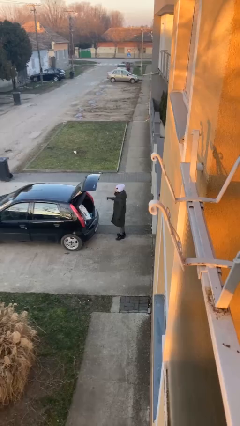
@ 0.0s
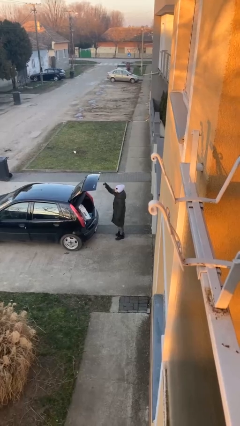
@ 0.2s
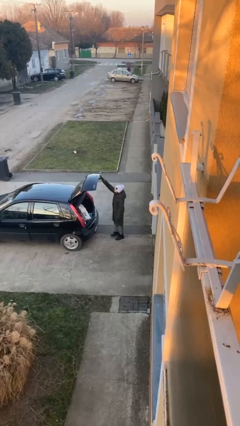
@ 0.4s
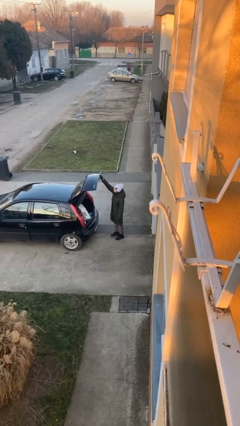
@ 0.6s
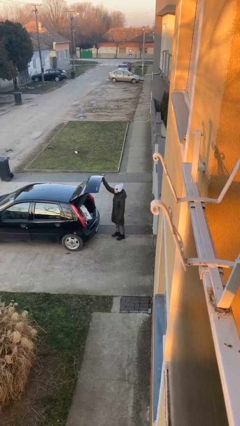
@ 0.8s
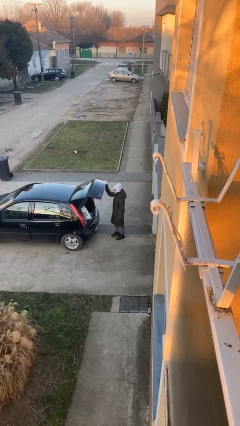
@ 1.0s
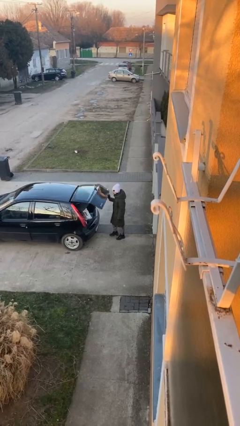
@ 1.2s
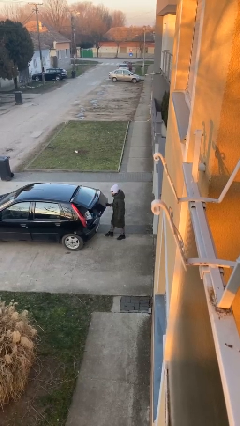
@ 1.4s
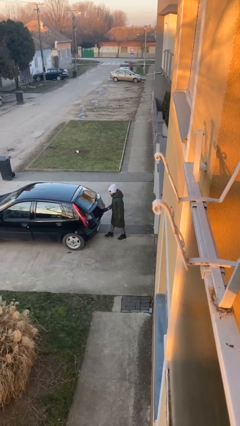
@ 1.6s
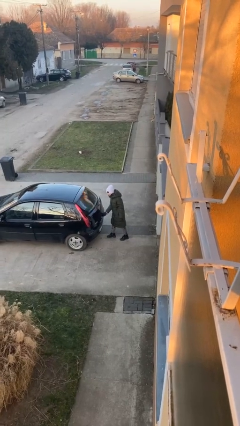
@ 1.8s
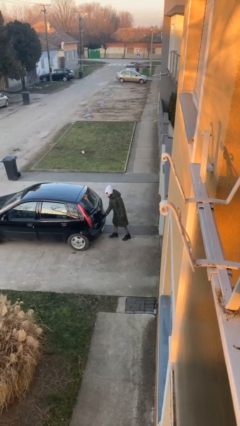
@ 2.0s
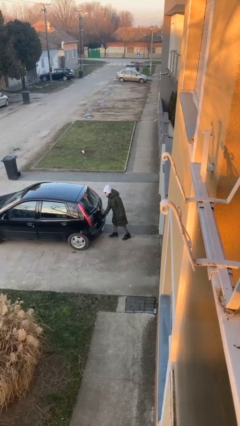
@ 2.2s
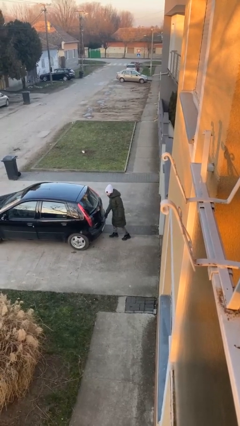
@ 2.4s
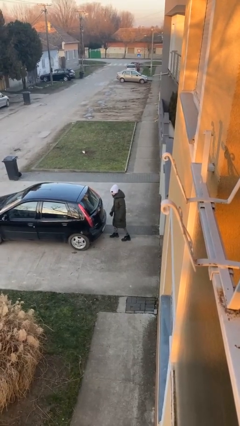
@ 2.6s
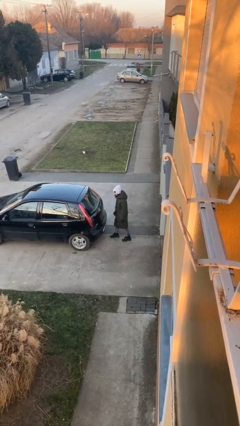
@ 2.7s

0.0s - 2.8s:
person closes car trunk

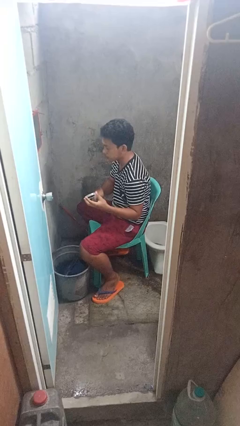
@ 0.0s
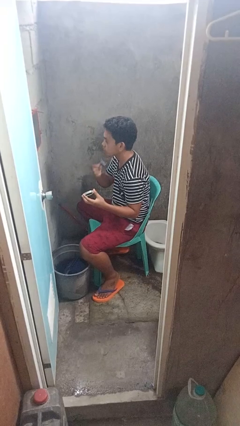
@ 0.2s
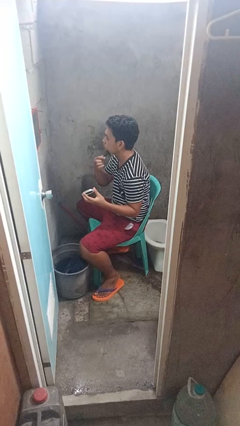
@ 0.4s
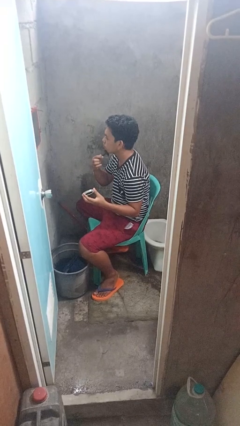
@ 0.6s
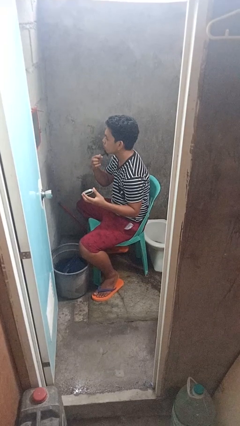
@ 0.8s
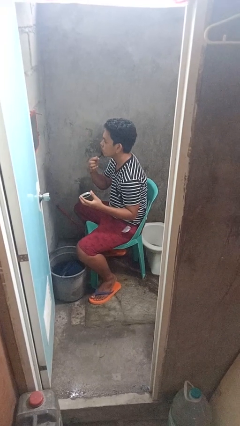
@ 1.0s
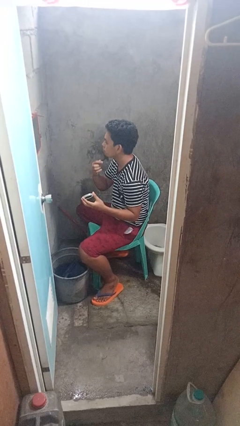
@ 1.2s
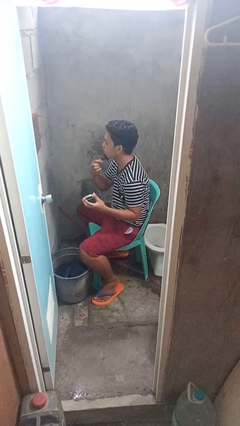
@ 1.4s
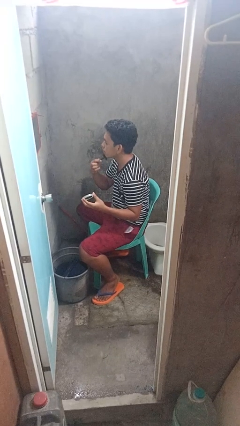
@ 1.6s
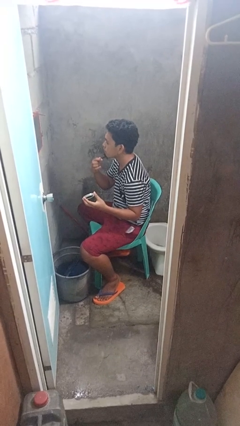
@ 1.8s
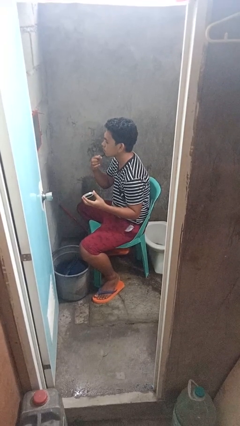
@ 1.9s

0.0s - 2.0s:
person shaves face

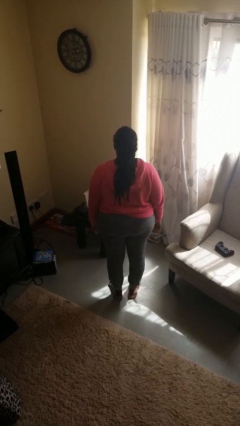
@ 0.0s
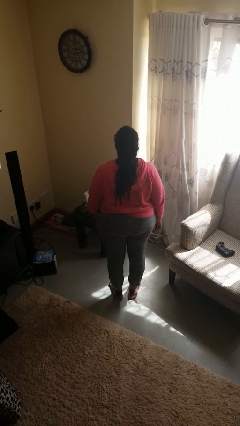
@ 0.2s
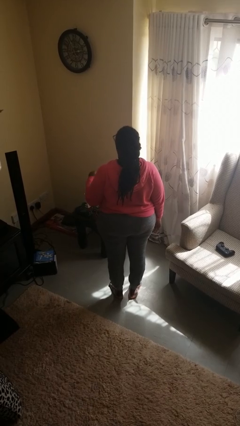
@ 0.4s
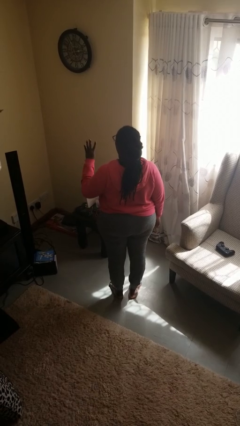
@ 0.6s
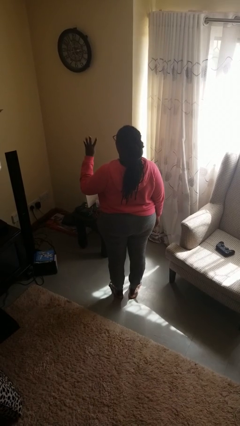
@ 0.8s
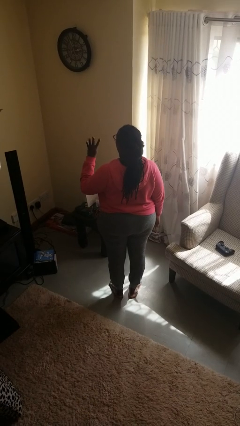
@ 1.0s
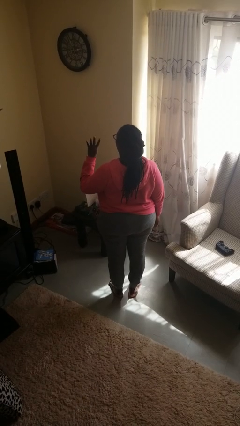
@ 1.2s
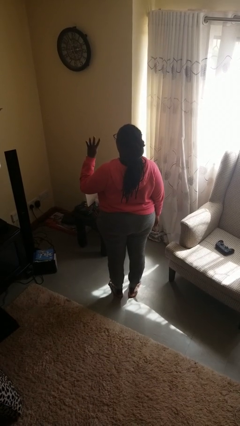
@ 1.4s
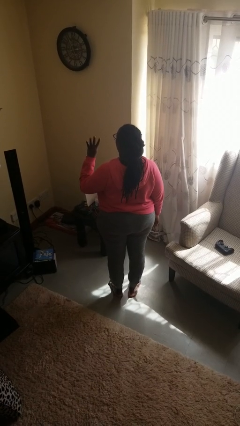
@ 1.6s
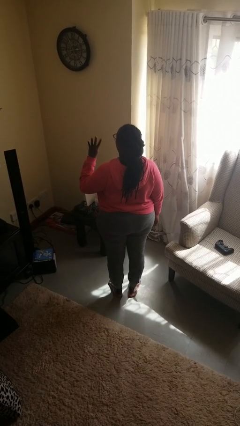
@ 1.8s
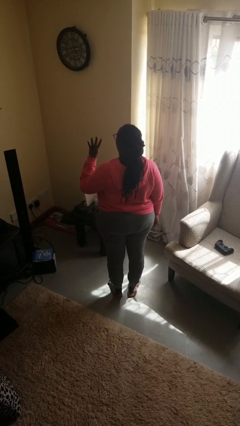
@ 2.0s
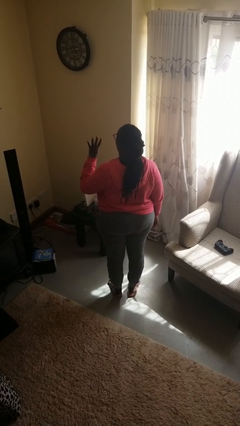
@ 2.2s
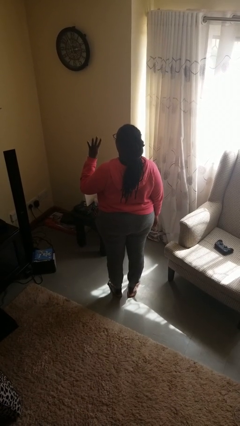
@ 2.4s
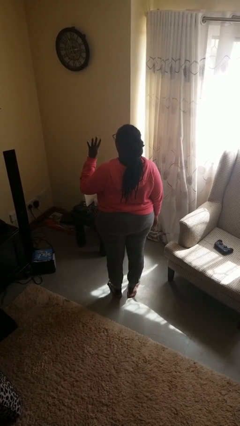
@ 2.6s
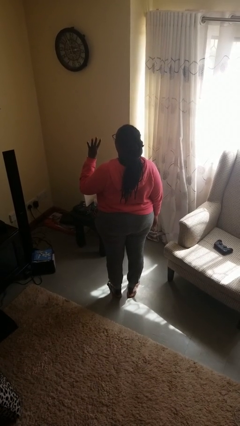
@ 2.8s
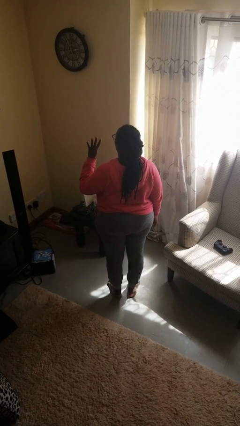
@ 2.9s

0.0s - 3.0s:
person gestures number four

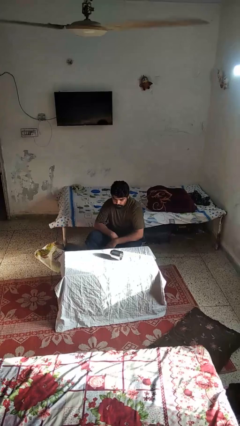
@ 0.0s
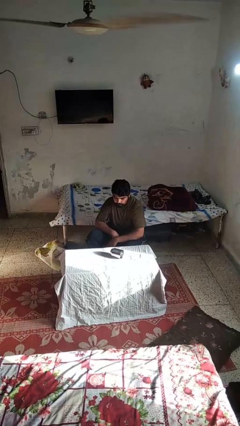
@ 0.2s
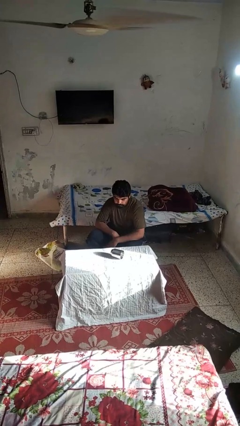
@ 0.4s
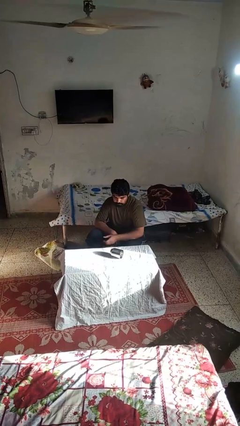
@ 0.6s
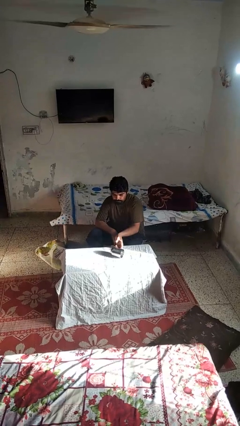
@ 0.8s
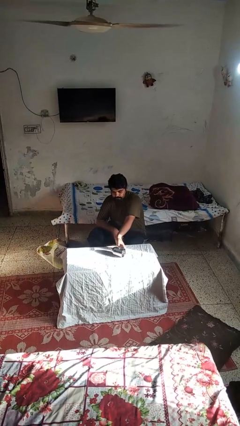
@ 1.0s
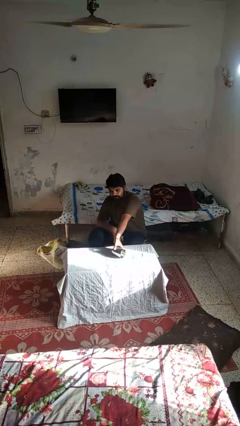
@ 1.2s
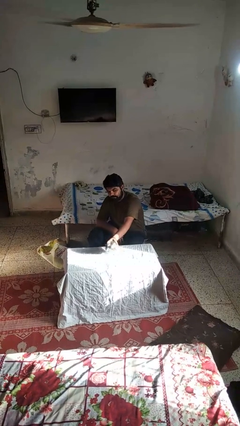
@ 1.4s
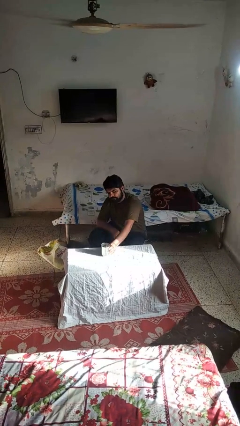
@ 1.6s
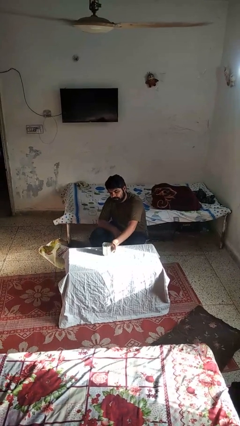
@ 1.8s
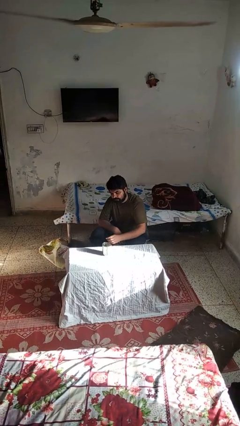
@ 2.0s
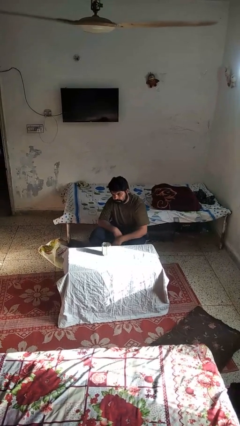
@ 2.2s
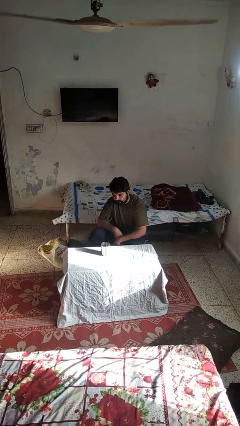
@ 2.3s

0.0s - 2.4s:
person sets upright glass

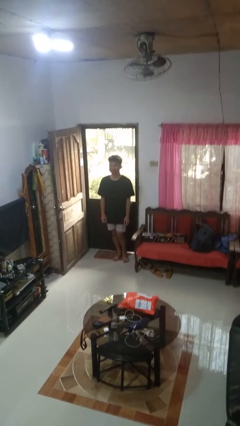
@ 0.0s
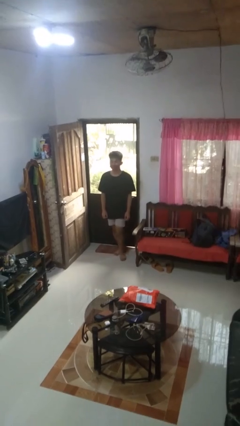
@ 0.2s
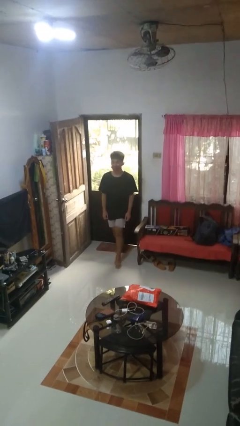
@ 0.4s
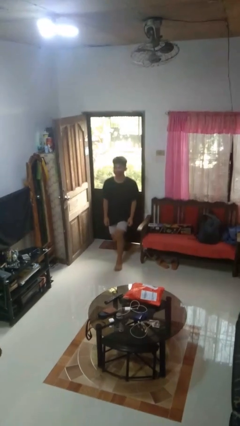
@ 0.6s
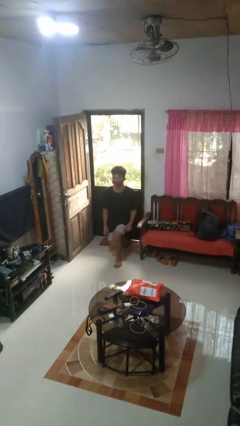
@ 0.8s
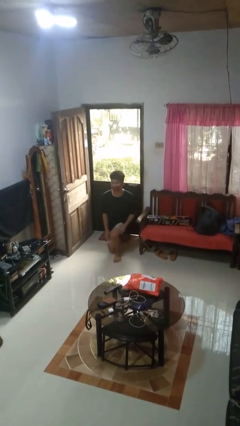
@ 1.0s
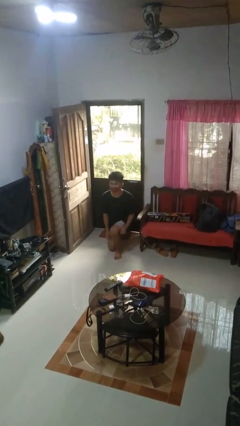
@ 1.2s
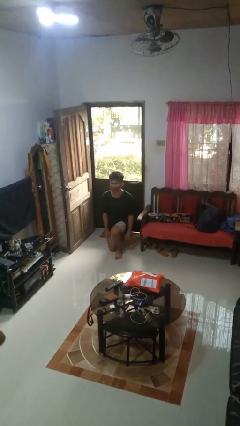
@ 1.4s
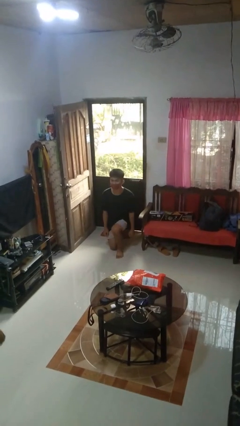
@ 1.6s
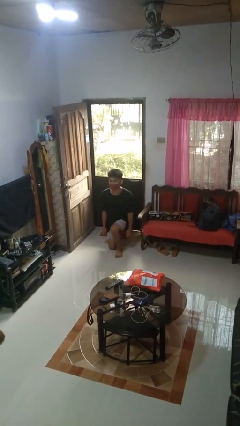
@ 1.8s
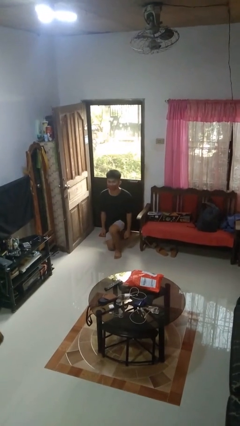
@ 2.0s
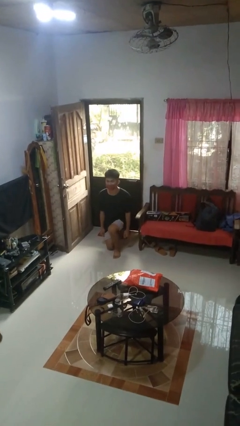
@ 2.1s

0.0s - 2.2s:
person kneels

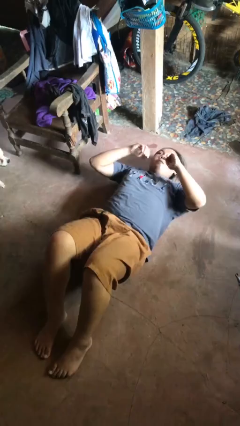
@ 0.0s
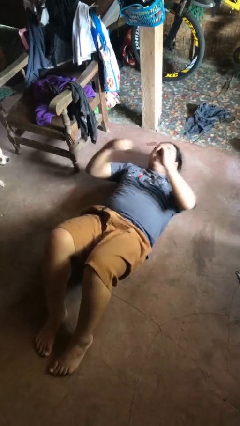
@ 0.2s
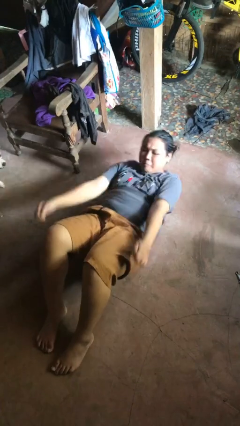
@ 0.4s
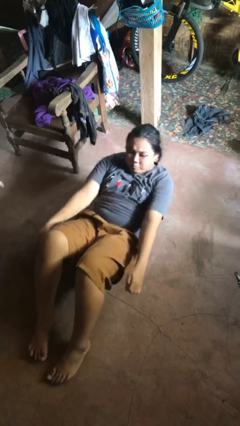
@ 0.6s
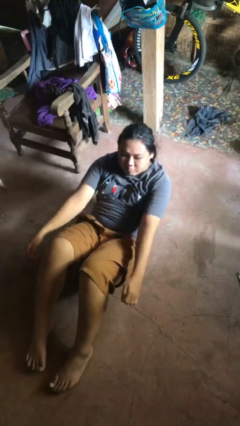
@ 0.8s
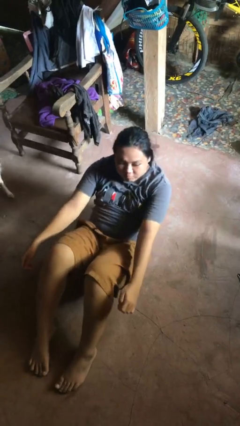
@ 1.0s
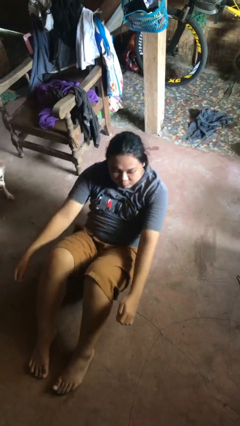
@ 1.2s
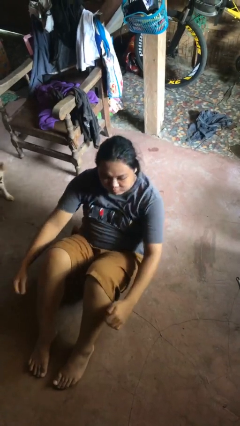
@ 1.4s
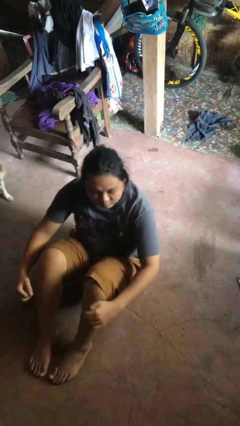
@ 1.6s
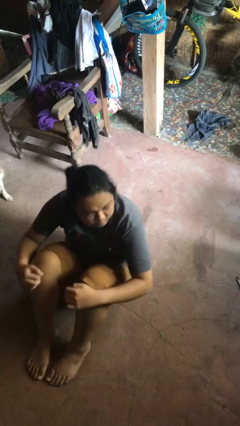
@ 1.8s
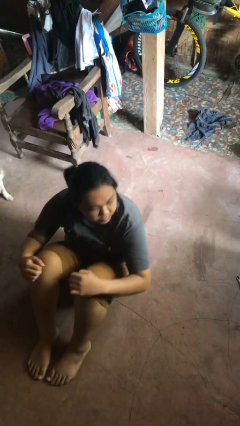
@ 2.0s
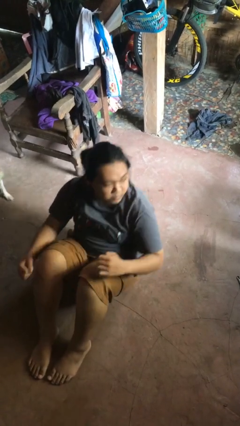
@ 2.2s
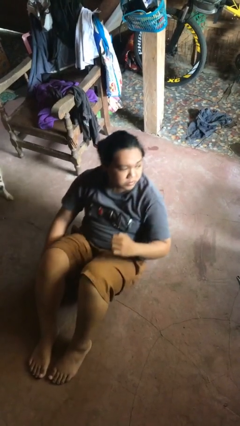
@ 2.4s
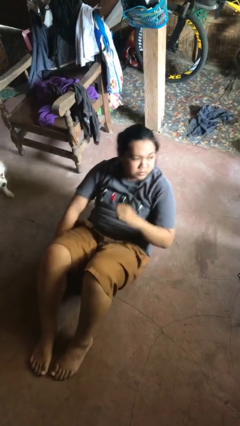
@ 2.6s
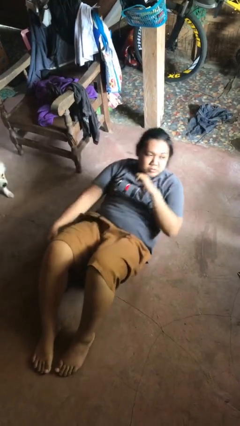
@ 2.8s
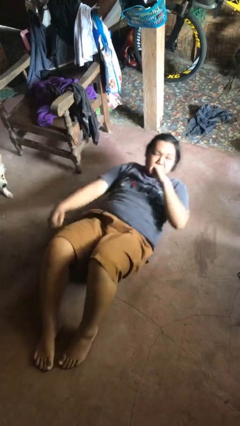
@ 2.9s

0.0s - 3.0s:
person exercises with situp

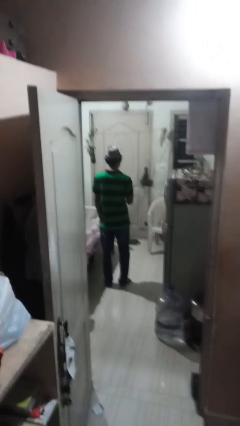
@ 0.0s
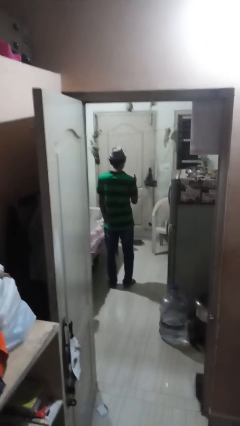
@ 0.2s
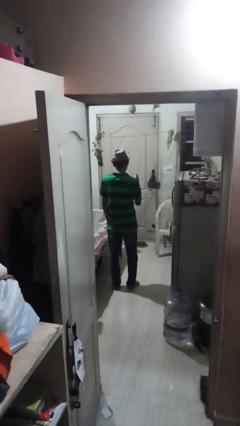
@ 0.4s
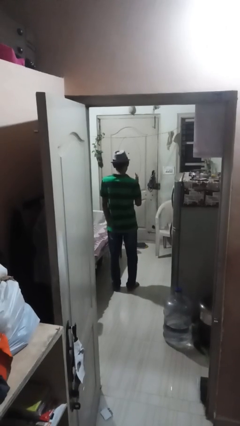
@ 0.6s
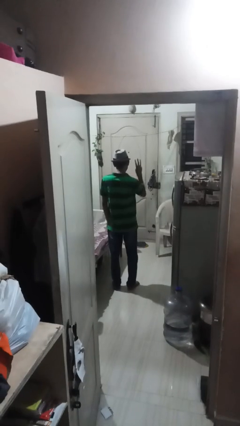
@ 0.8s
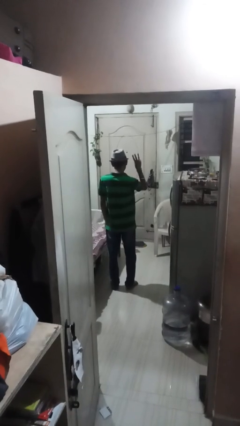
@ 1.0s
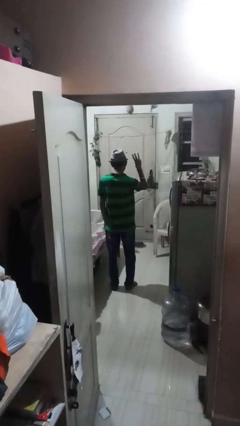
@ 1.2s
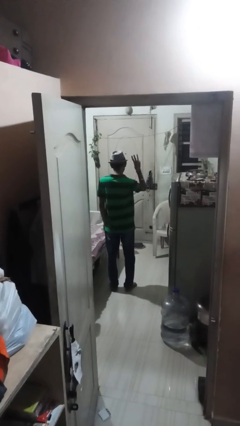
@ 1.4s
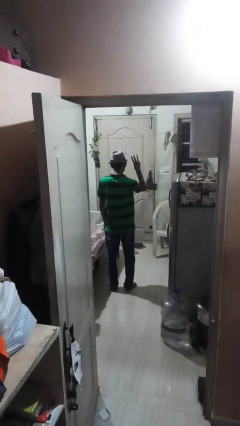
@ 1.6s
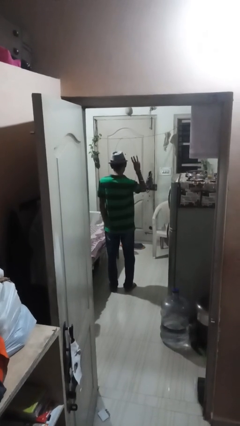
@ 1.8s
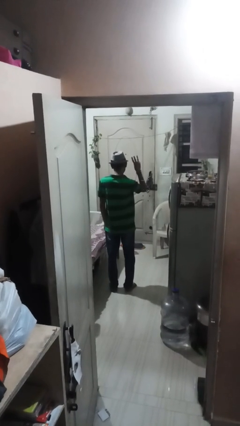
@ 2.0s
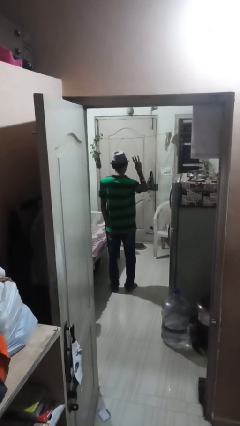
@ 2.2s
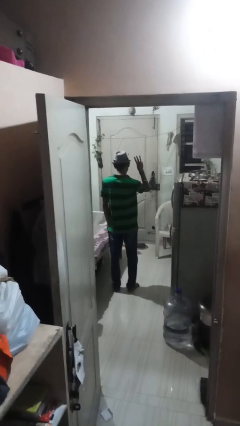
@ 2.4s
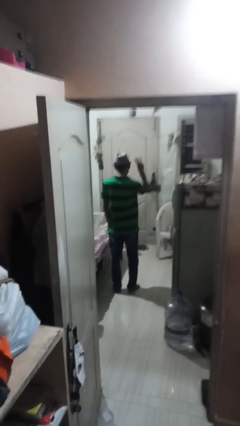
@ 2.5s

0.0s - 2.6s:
person gestures number three
